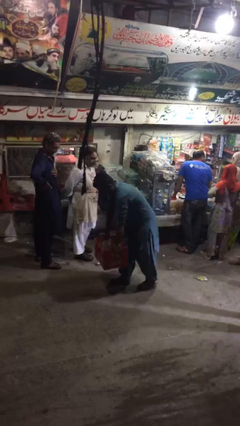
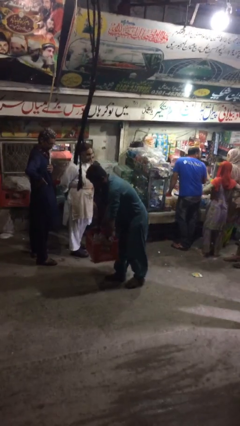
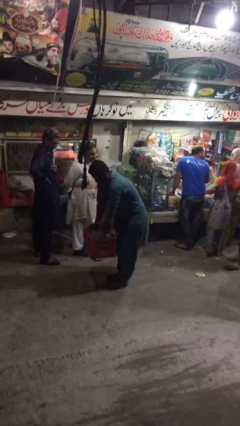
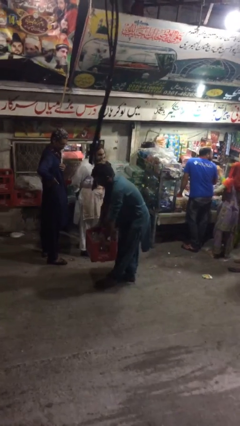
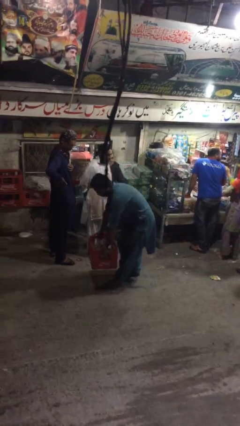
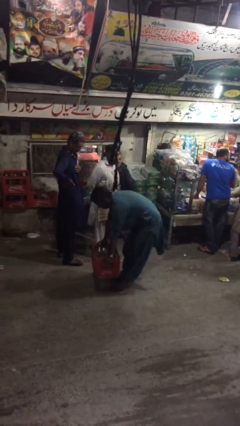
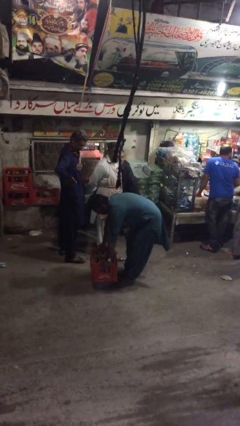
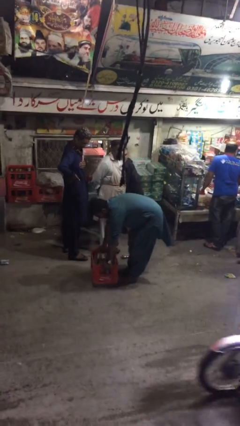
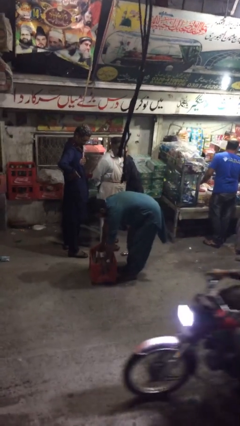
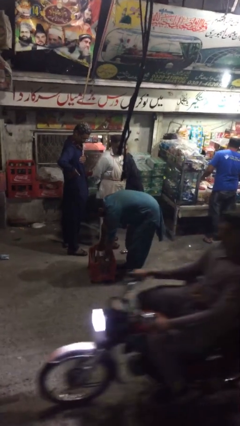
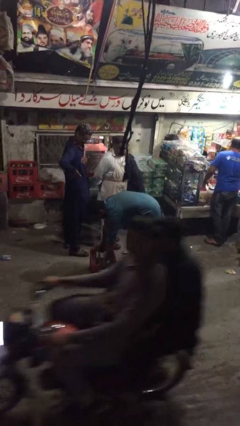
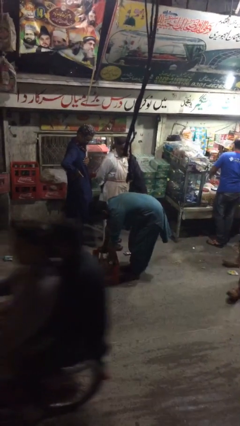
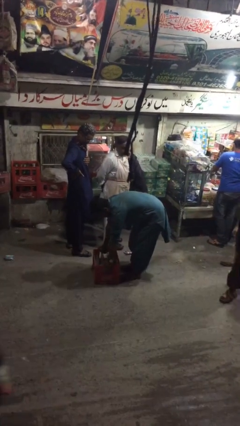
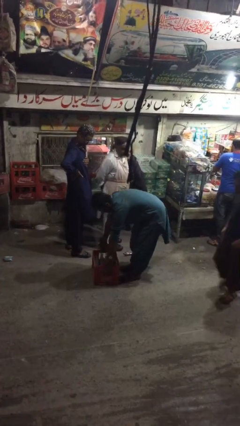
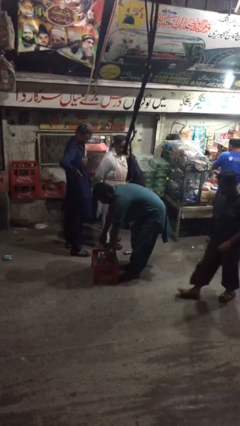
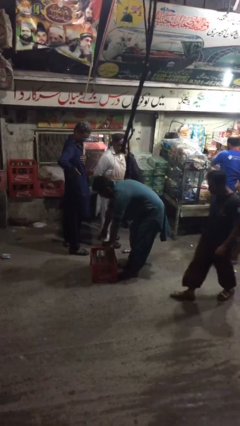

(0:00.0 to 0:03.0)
person puts down object on floor

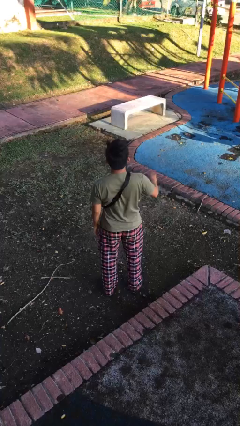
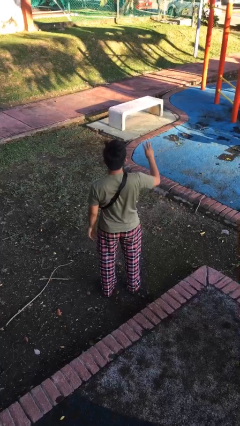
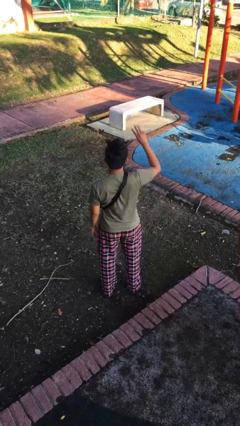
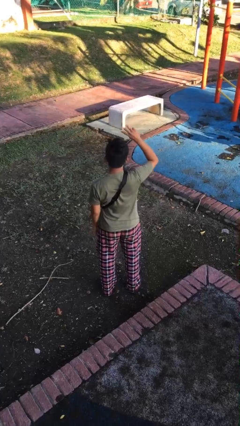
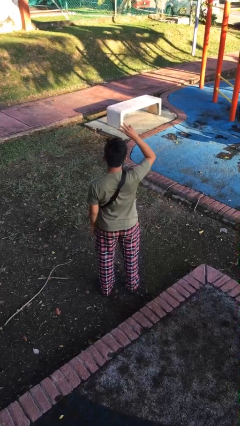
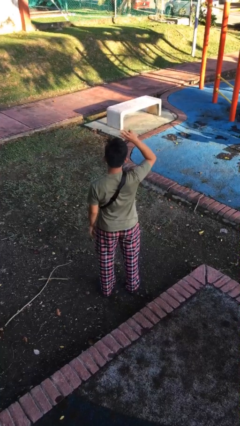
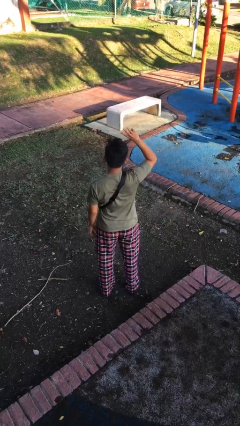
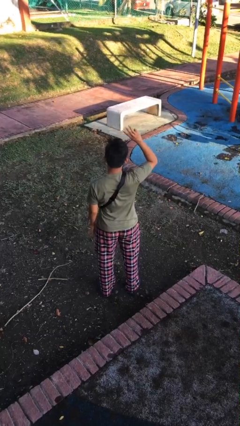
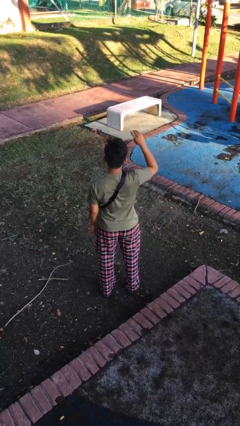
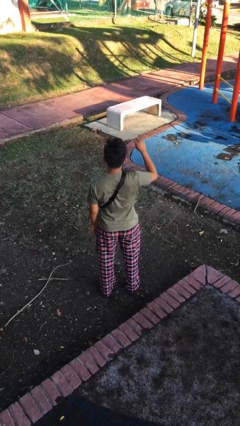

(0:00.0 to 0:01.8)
person gestures number three

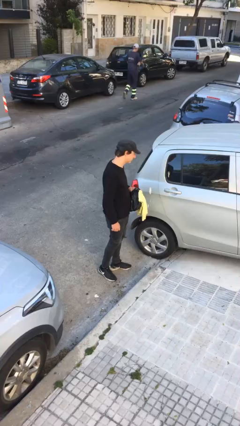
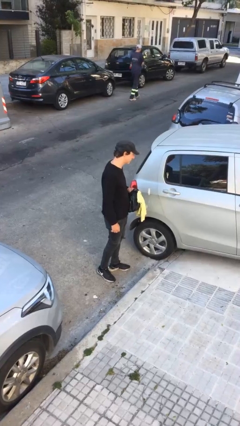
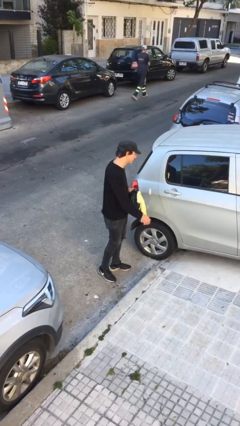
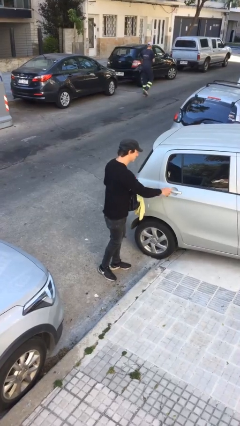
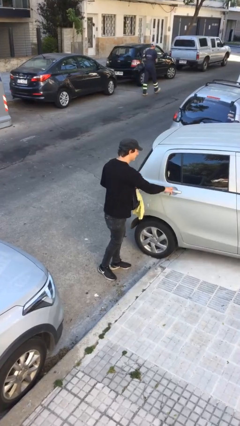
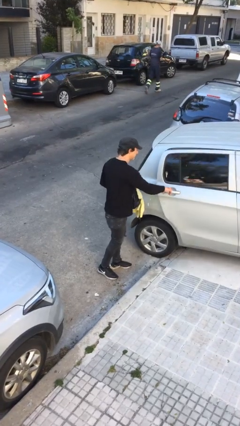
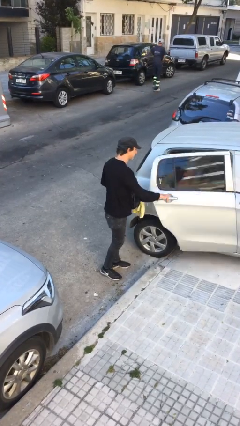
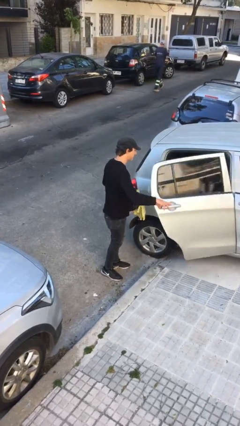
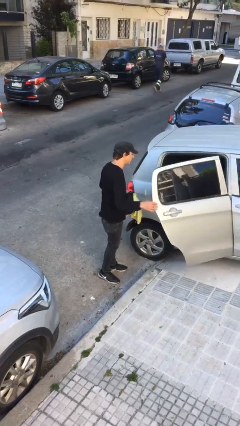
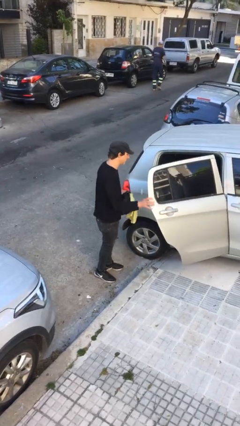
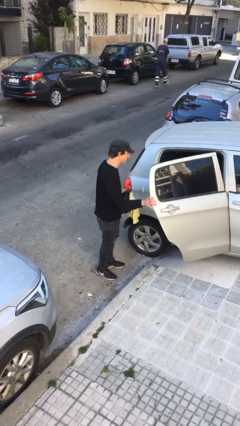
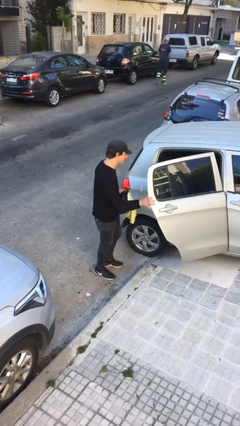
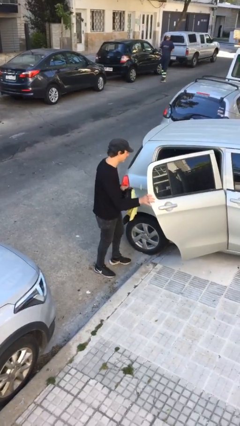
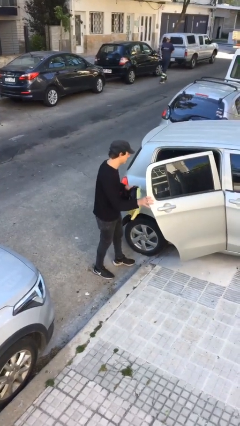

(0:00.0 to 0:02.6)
person opens car door

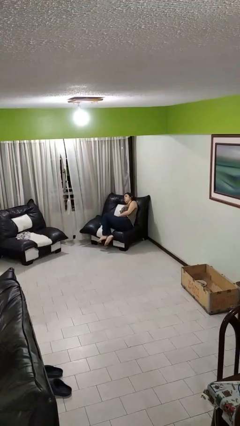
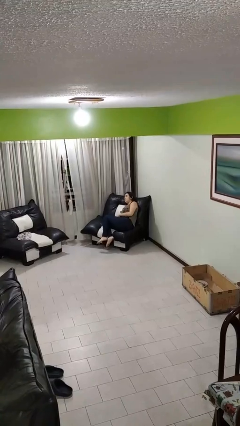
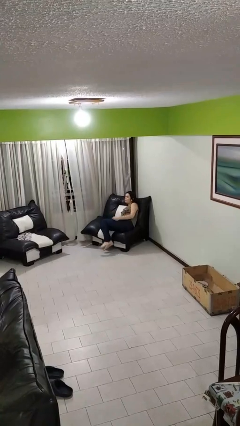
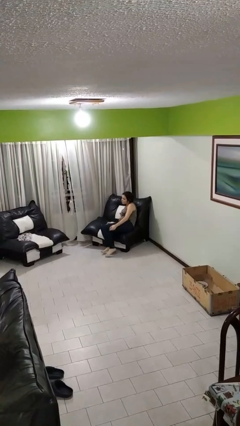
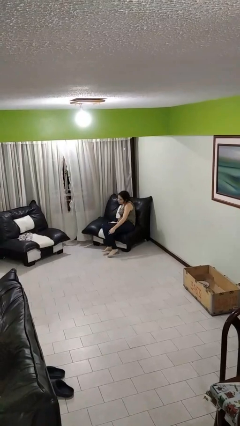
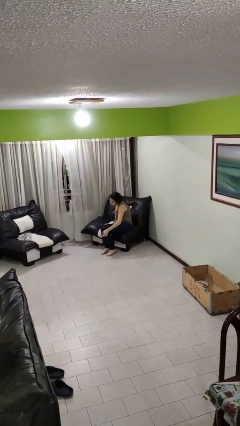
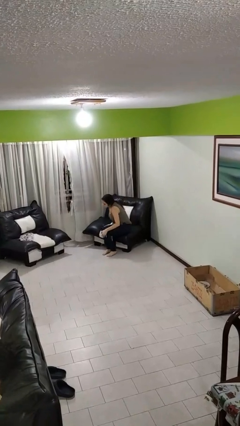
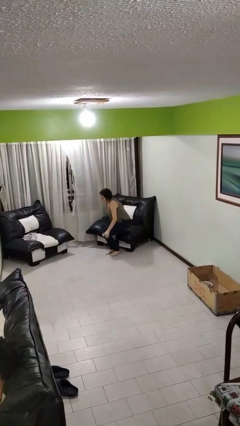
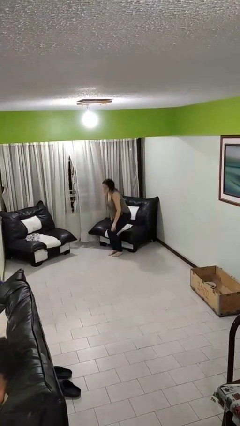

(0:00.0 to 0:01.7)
person stands up

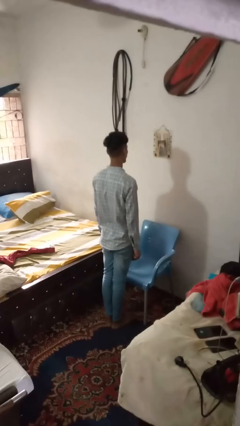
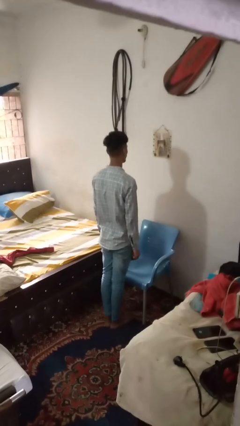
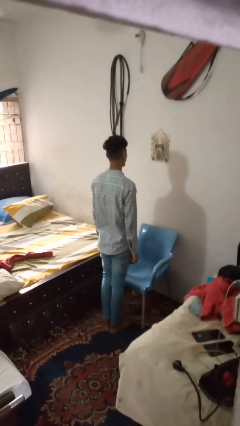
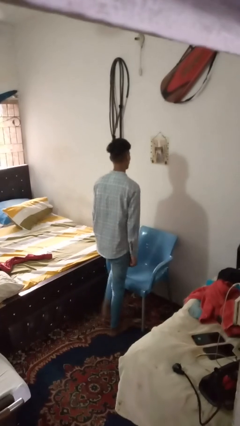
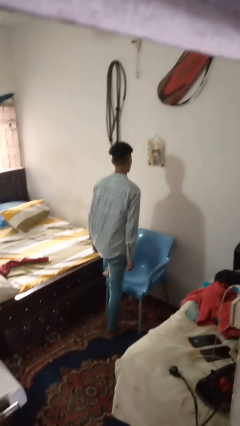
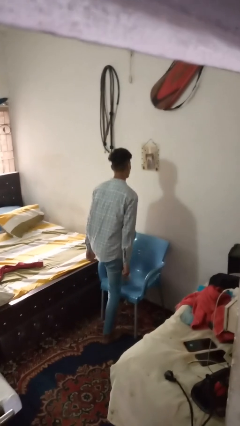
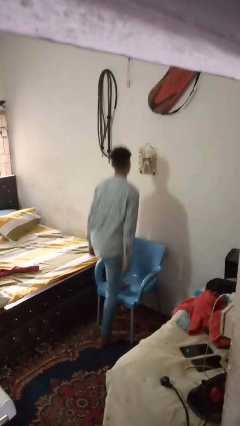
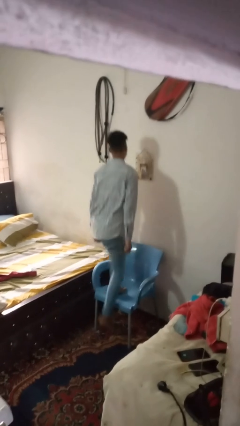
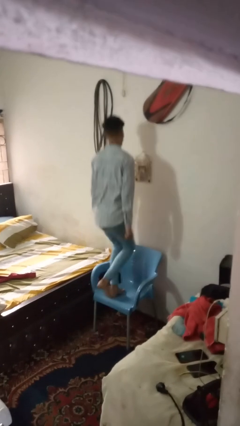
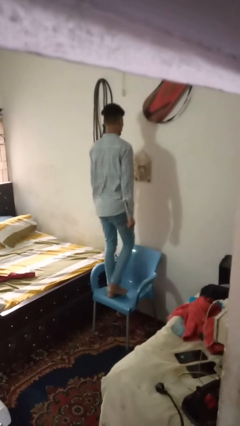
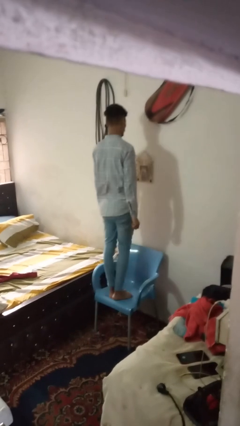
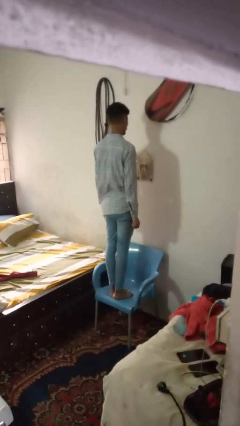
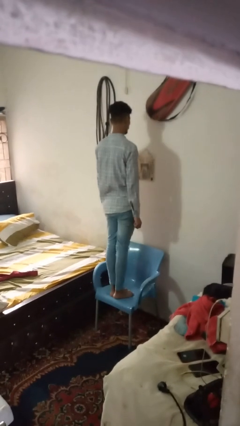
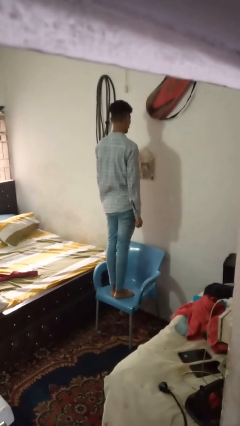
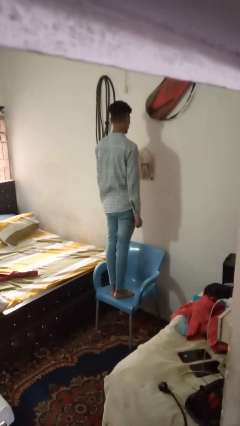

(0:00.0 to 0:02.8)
person climbs on chair

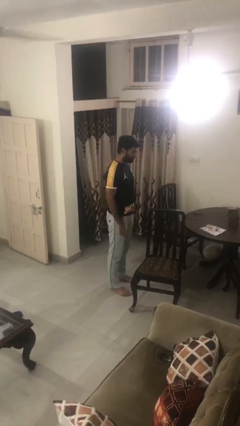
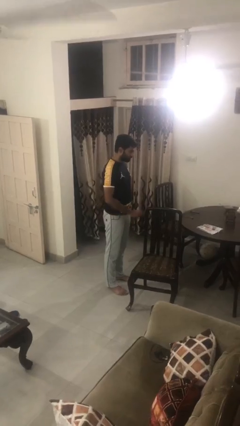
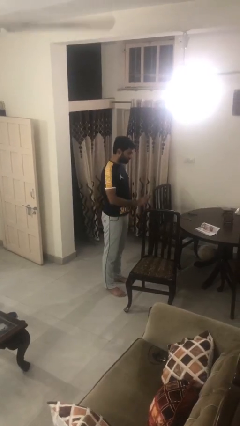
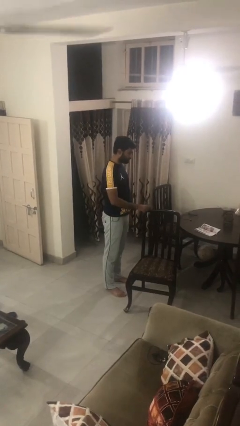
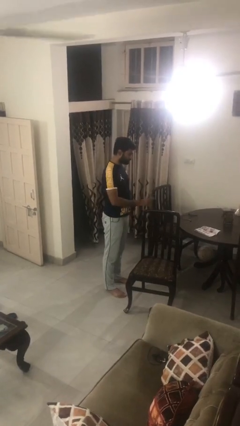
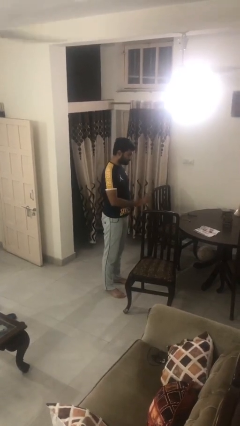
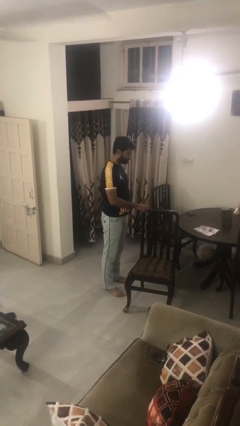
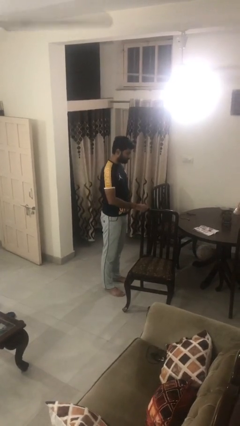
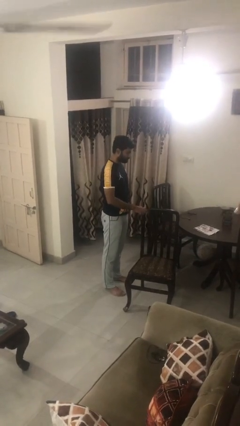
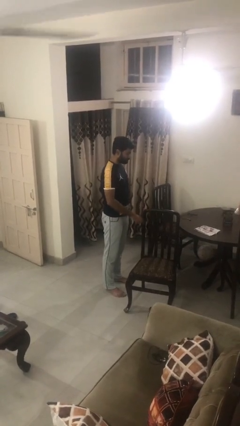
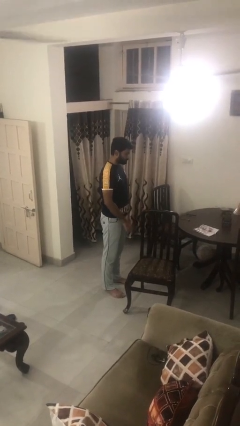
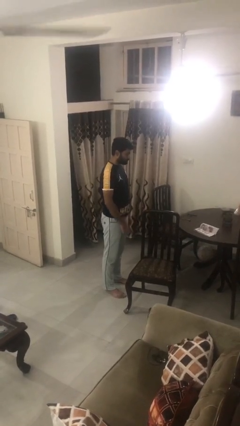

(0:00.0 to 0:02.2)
person taps object with finger

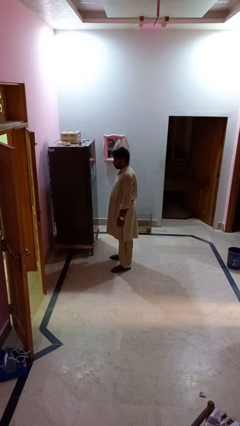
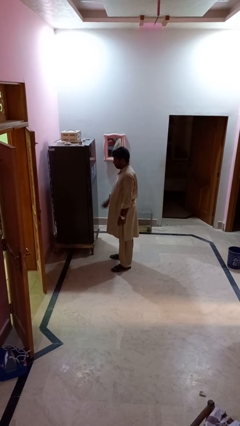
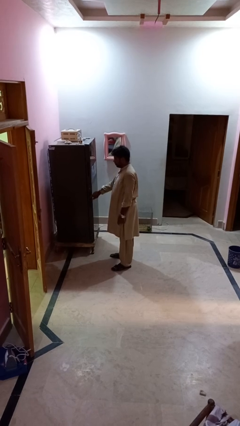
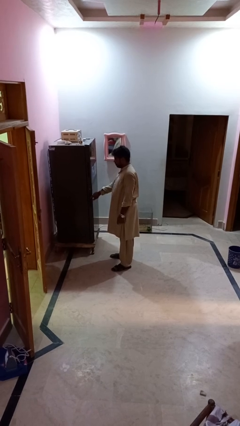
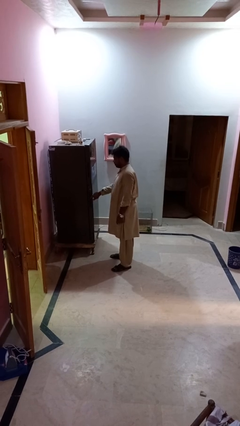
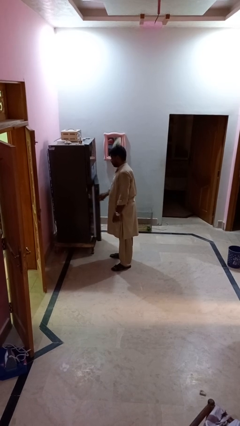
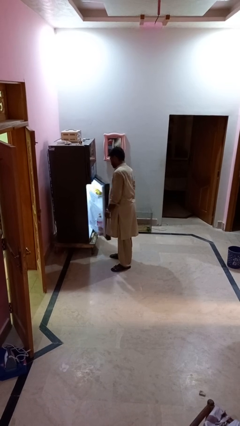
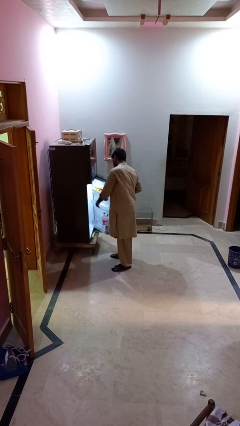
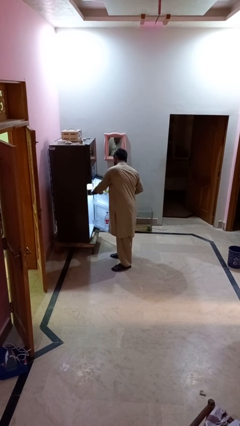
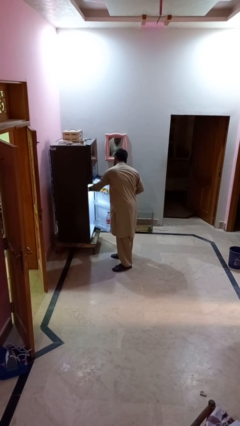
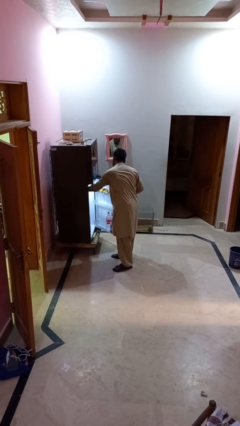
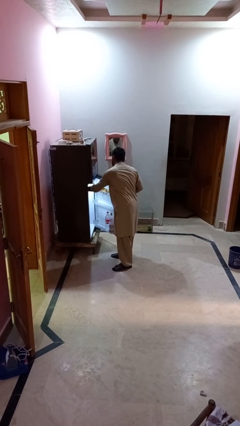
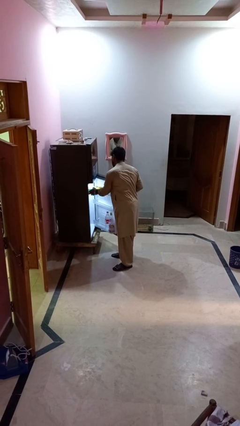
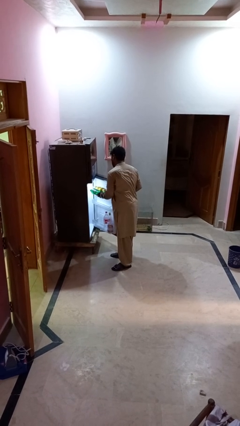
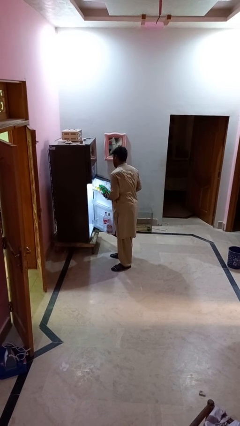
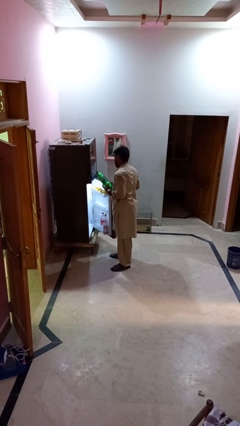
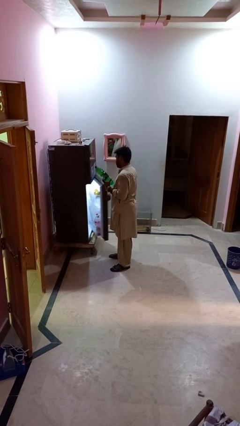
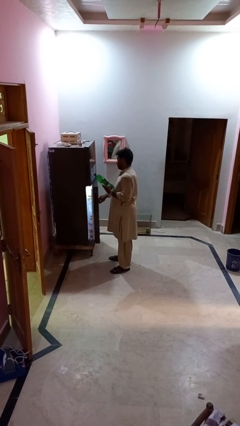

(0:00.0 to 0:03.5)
person takes object from refrigerator
